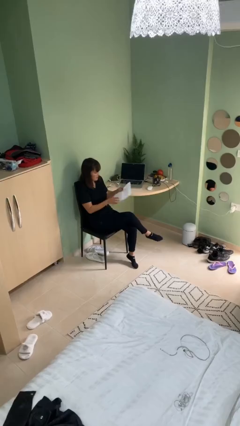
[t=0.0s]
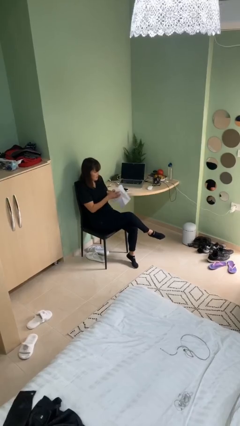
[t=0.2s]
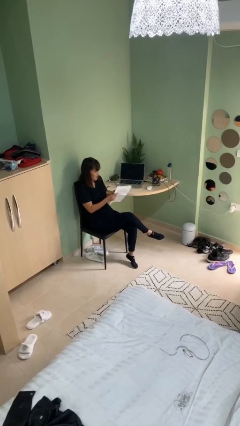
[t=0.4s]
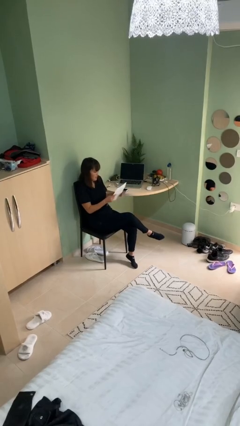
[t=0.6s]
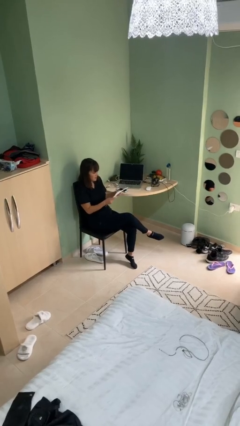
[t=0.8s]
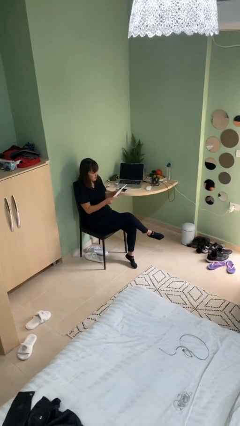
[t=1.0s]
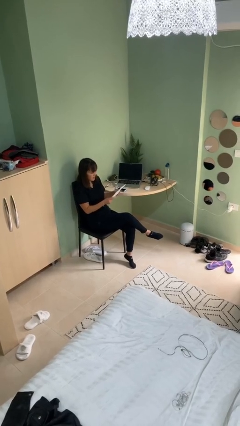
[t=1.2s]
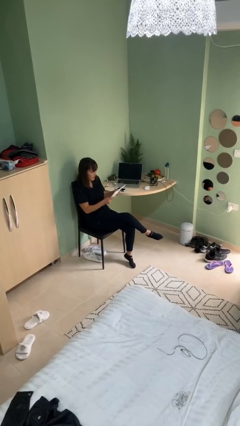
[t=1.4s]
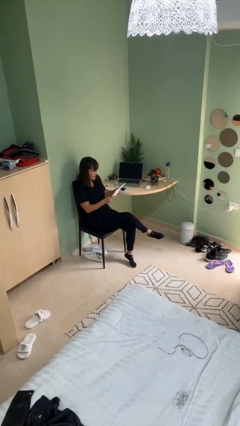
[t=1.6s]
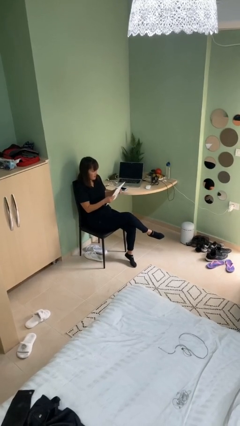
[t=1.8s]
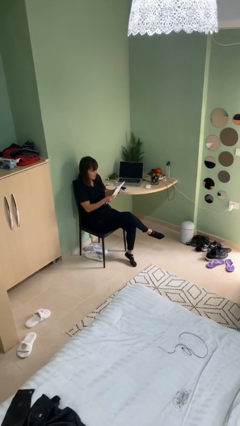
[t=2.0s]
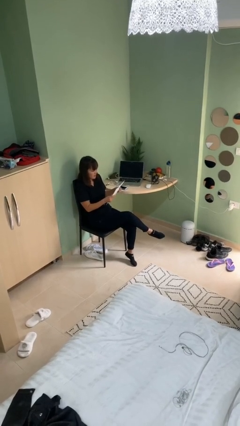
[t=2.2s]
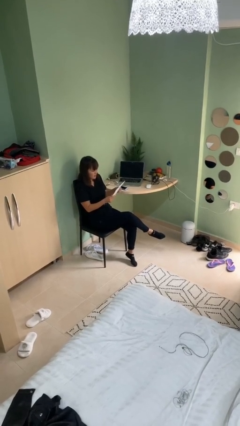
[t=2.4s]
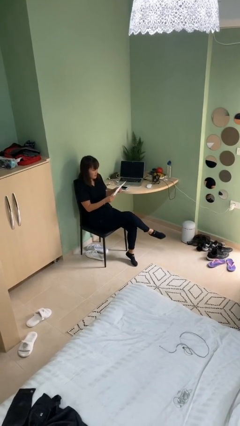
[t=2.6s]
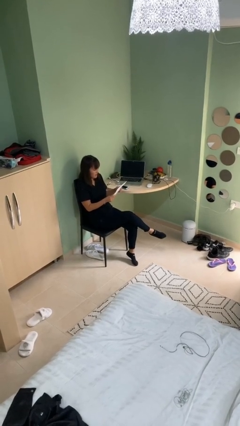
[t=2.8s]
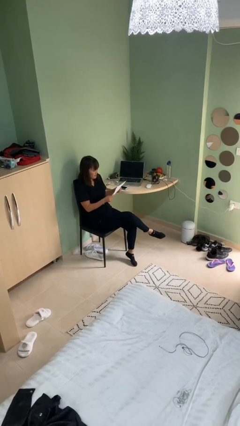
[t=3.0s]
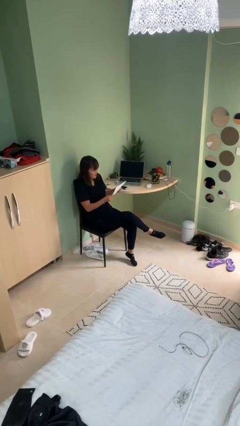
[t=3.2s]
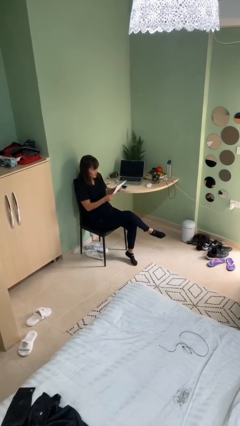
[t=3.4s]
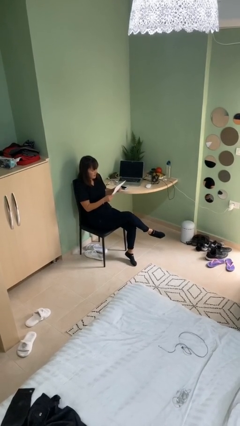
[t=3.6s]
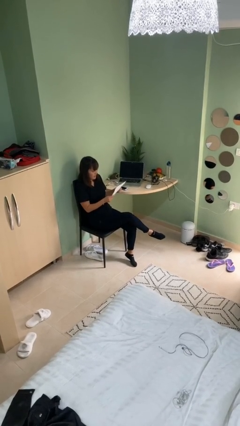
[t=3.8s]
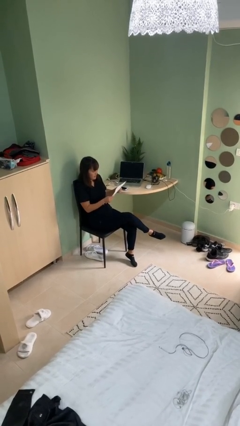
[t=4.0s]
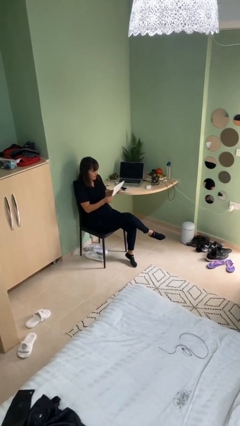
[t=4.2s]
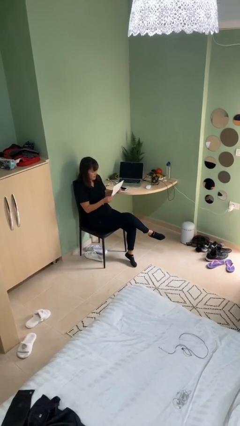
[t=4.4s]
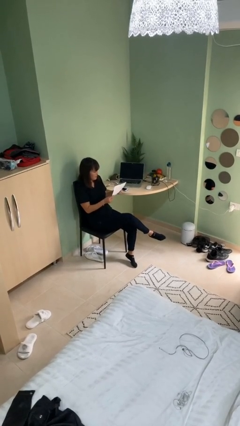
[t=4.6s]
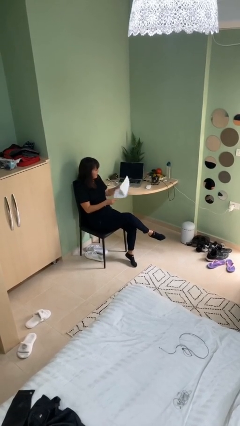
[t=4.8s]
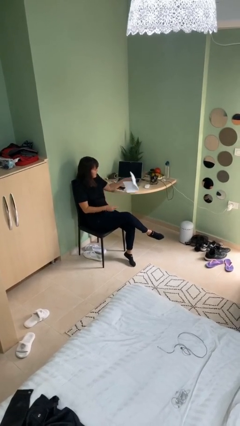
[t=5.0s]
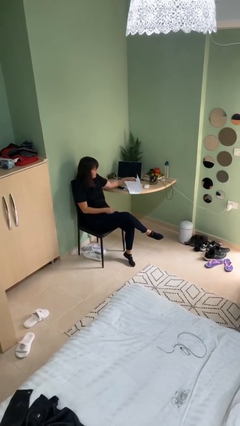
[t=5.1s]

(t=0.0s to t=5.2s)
person reads document

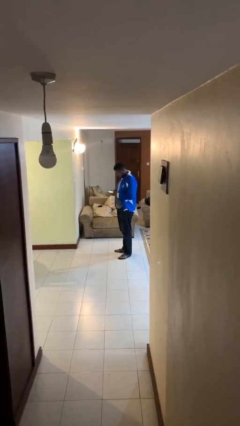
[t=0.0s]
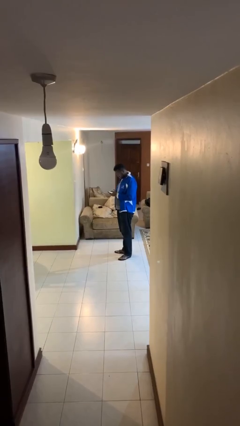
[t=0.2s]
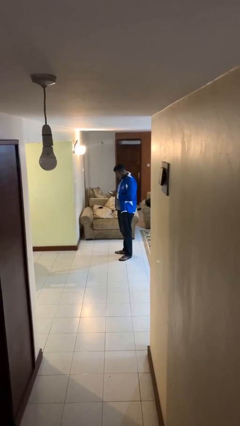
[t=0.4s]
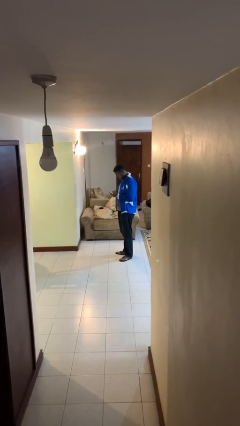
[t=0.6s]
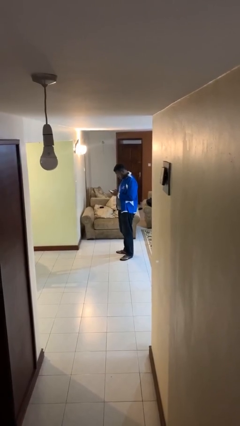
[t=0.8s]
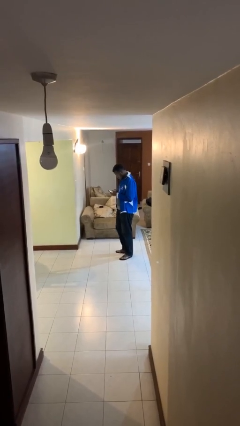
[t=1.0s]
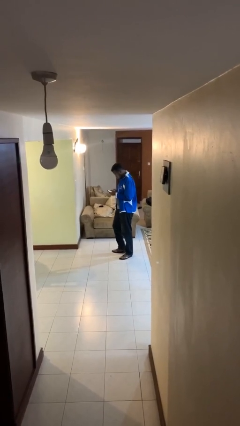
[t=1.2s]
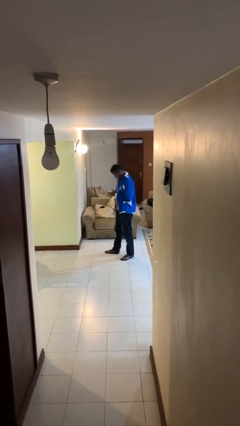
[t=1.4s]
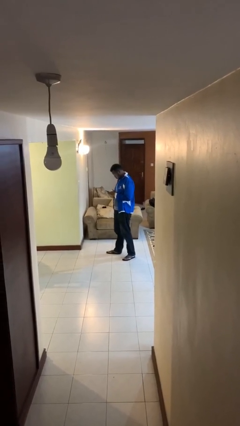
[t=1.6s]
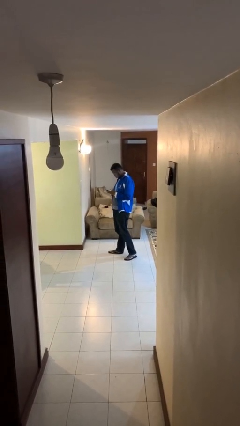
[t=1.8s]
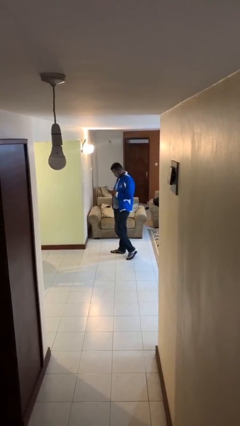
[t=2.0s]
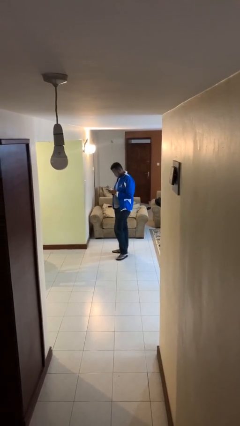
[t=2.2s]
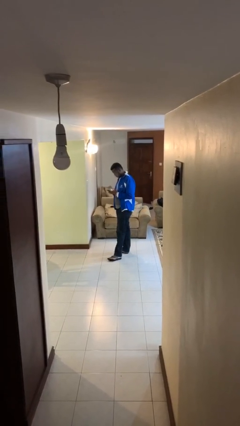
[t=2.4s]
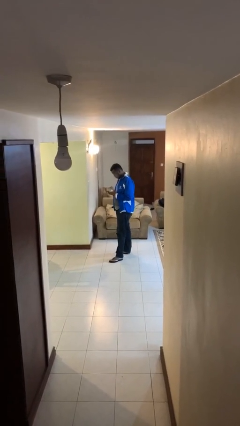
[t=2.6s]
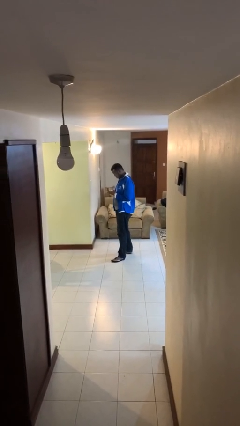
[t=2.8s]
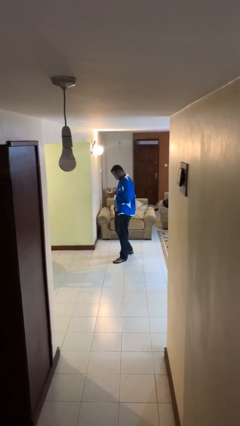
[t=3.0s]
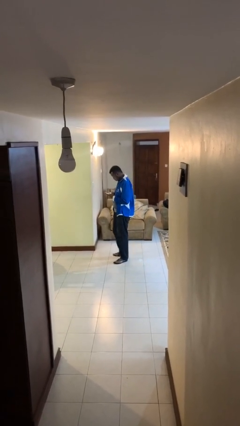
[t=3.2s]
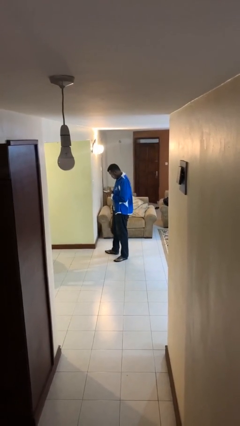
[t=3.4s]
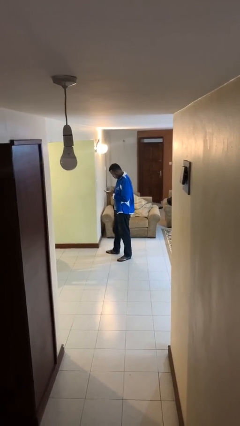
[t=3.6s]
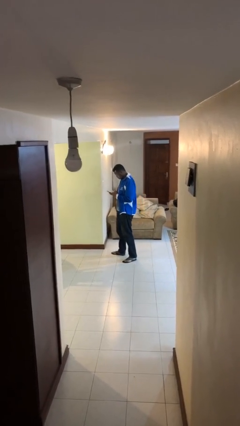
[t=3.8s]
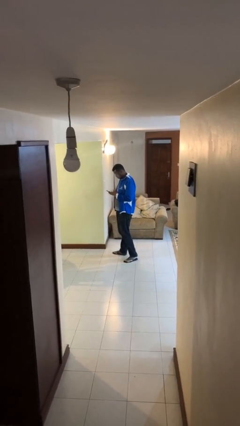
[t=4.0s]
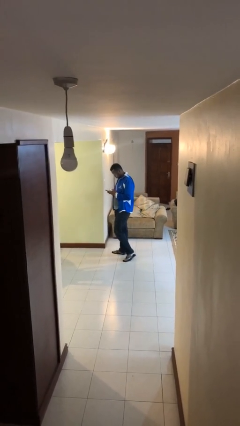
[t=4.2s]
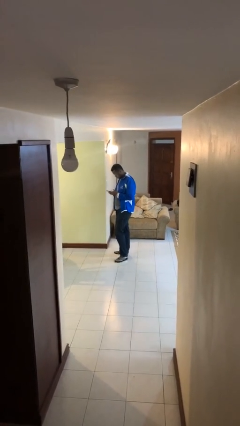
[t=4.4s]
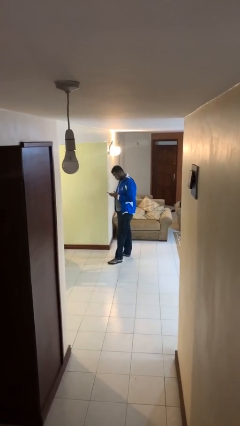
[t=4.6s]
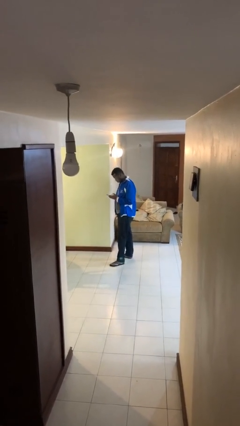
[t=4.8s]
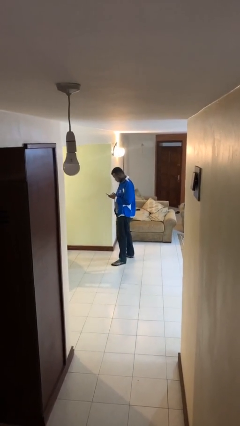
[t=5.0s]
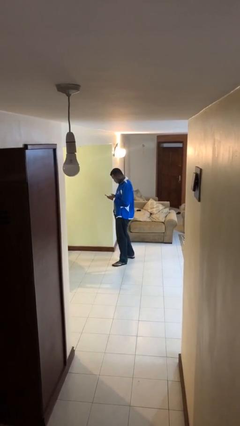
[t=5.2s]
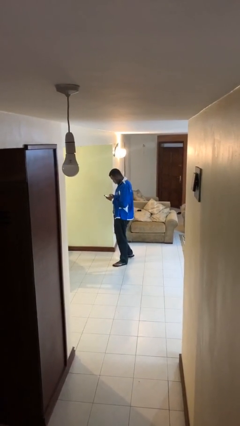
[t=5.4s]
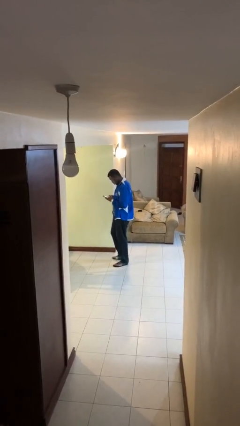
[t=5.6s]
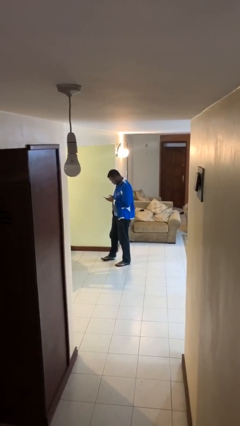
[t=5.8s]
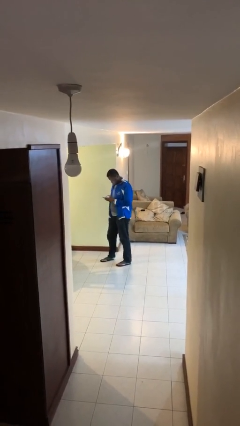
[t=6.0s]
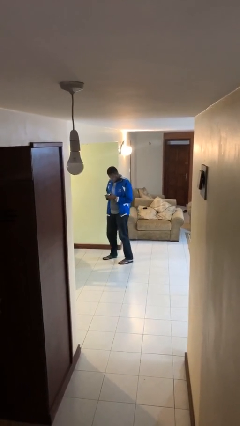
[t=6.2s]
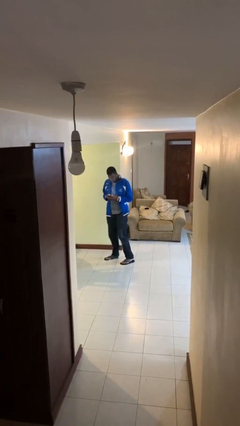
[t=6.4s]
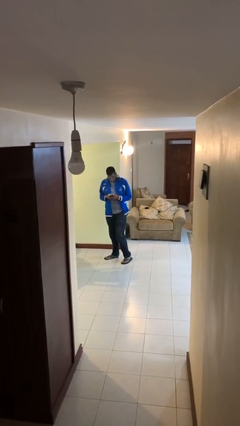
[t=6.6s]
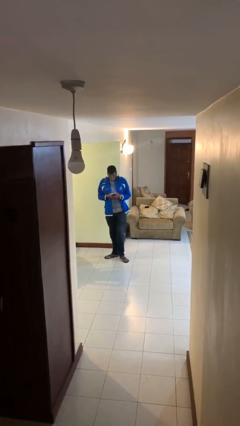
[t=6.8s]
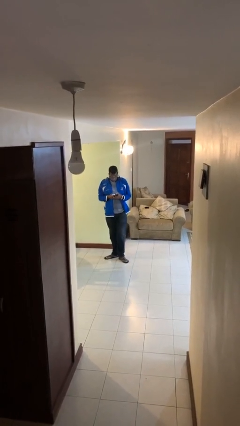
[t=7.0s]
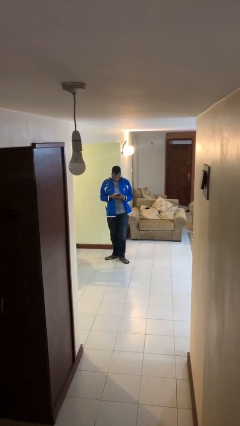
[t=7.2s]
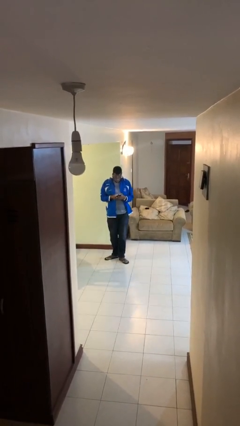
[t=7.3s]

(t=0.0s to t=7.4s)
person texts on phone

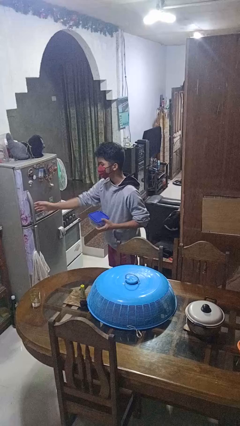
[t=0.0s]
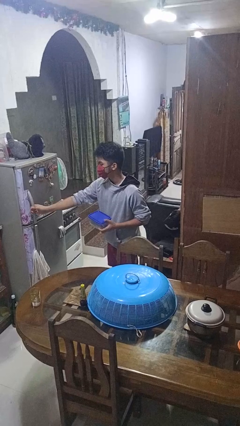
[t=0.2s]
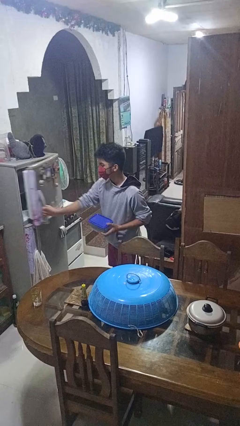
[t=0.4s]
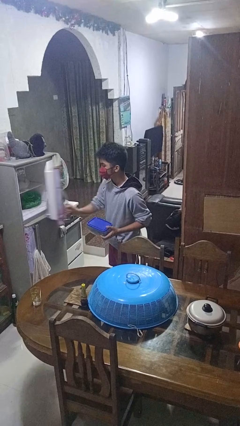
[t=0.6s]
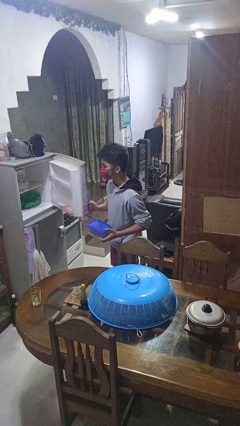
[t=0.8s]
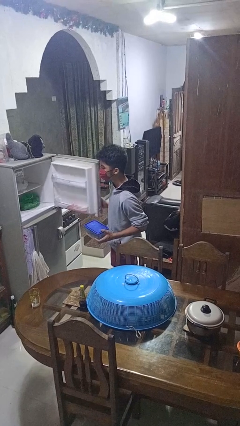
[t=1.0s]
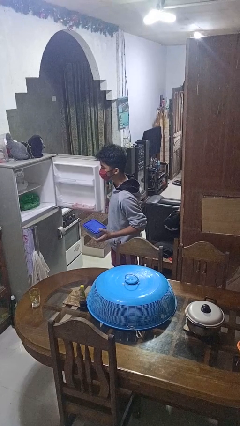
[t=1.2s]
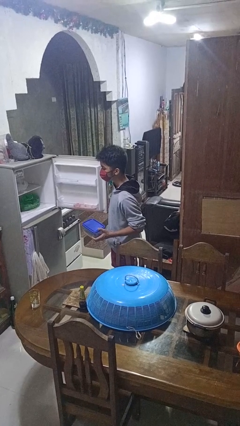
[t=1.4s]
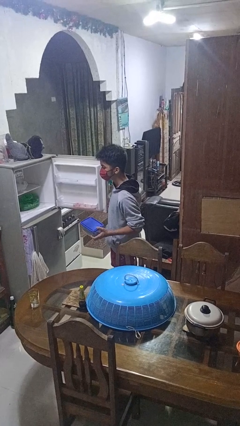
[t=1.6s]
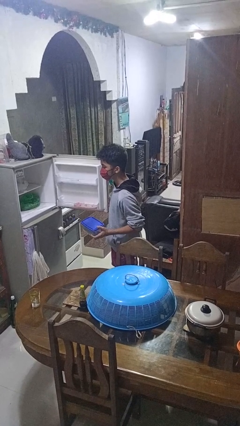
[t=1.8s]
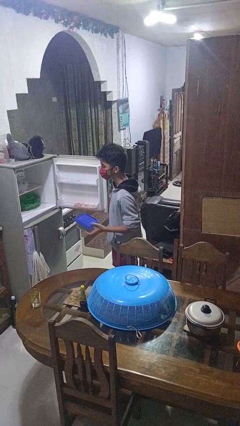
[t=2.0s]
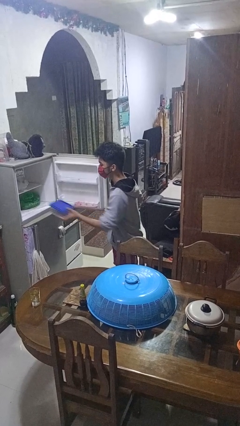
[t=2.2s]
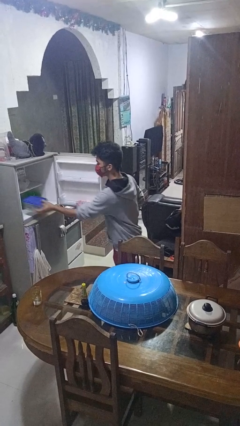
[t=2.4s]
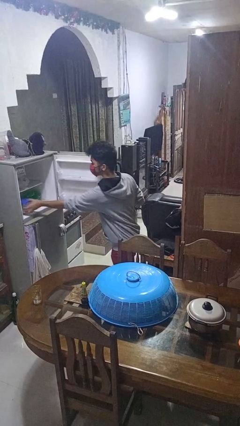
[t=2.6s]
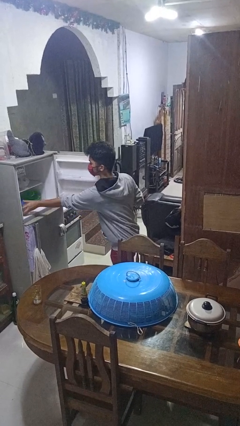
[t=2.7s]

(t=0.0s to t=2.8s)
person opens refrigerator

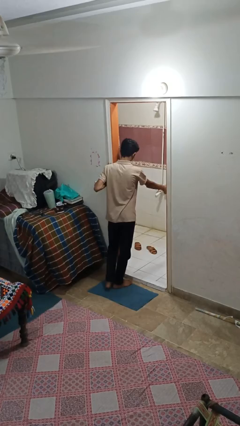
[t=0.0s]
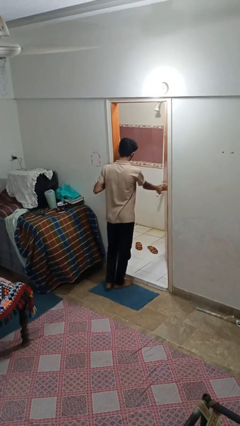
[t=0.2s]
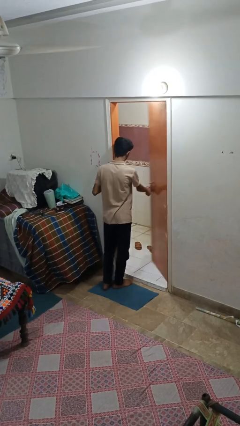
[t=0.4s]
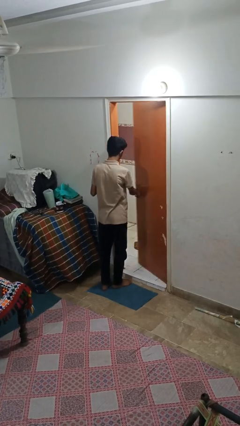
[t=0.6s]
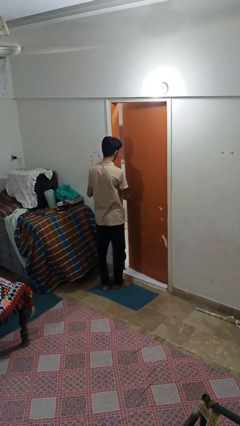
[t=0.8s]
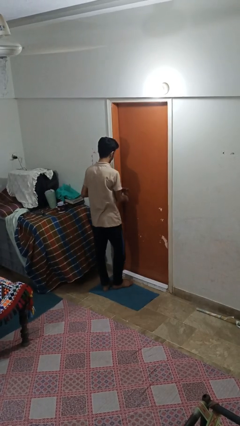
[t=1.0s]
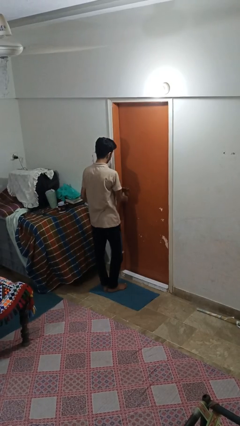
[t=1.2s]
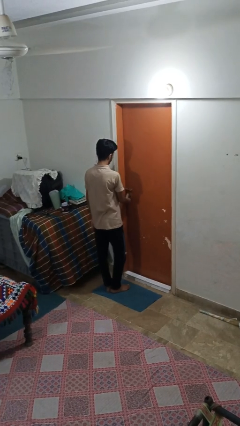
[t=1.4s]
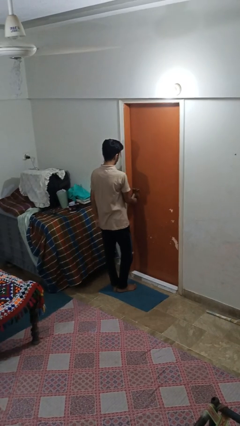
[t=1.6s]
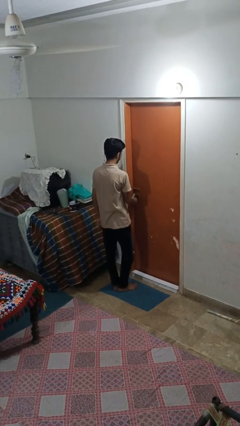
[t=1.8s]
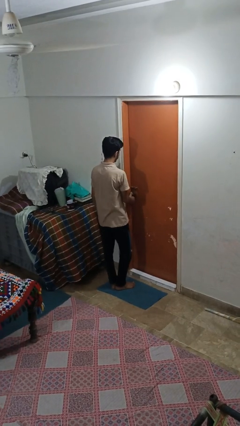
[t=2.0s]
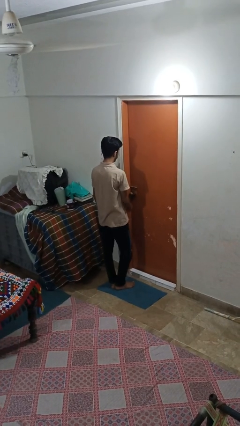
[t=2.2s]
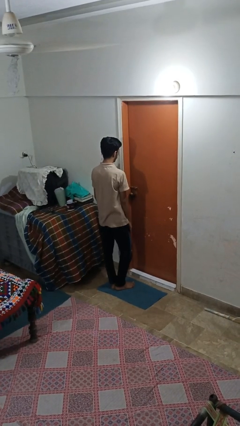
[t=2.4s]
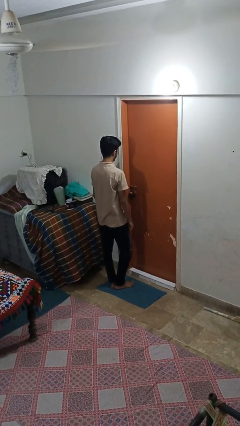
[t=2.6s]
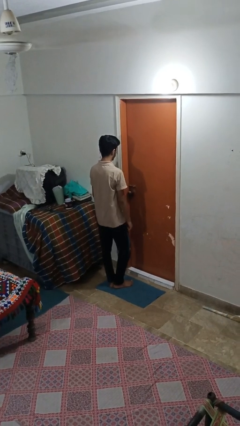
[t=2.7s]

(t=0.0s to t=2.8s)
person closes facility door
